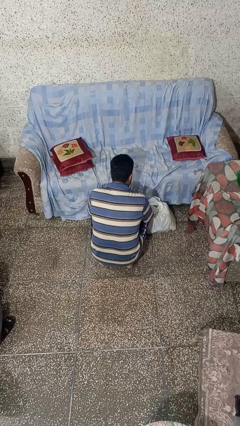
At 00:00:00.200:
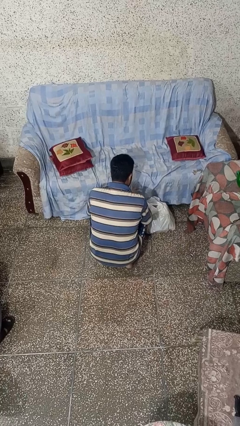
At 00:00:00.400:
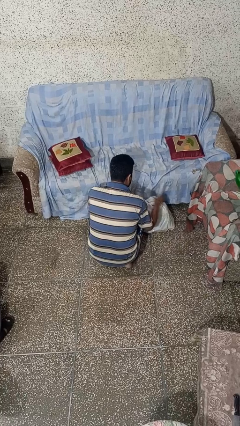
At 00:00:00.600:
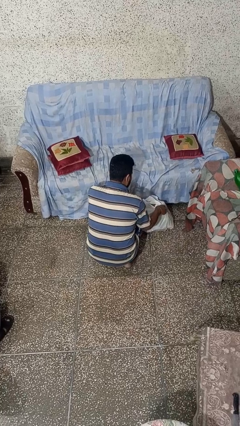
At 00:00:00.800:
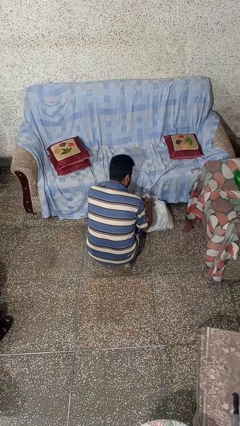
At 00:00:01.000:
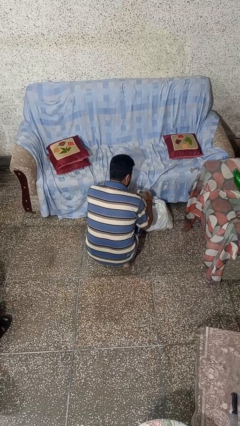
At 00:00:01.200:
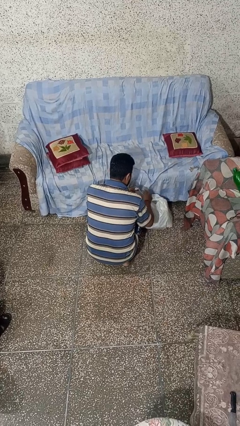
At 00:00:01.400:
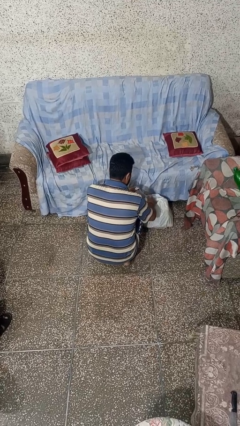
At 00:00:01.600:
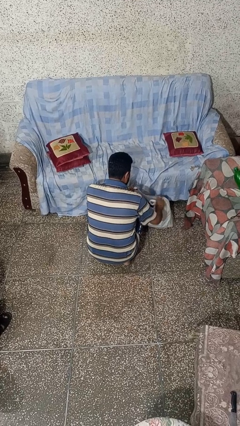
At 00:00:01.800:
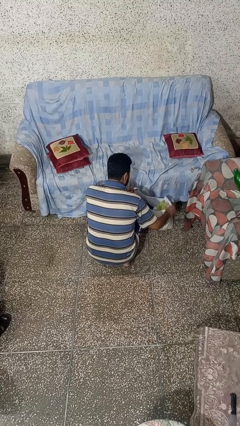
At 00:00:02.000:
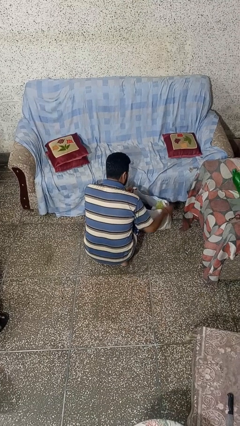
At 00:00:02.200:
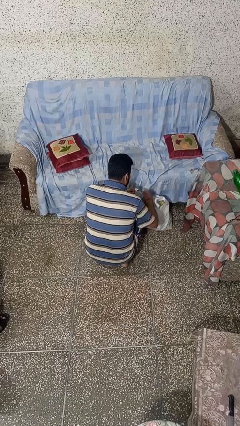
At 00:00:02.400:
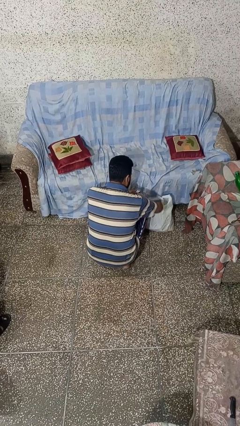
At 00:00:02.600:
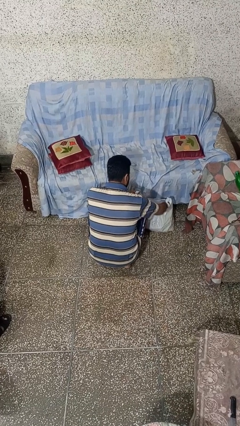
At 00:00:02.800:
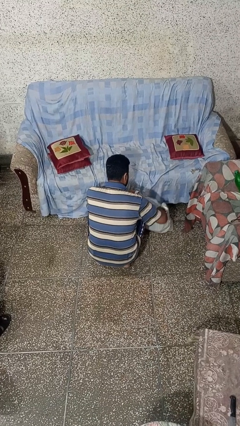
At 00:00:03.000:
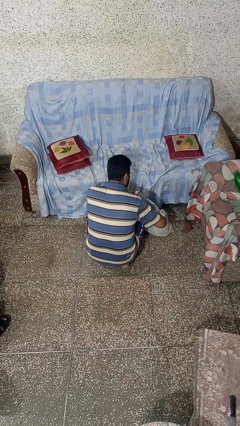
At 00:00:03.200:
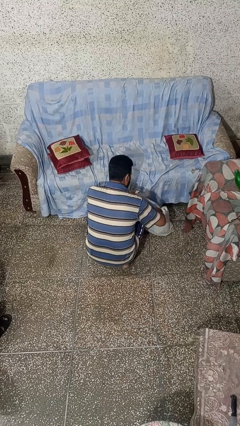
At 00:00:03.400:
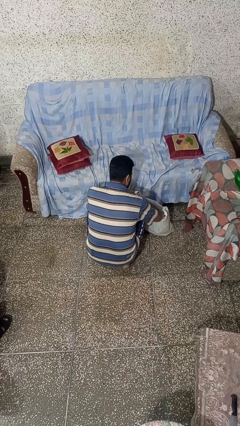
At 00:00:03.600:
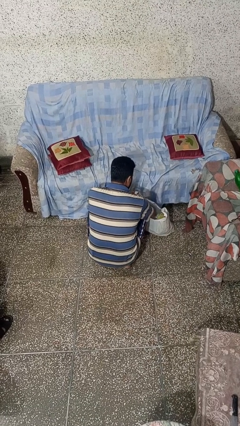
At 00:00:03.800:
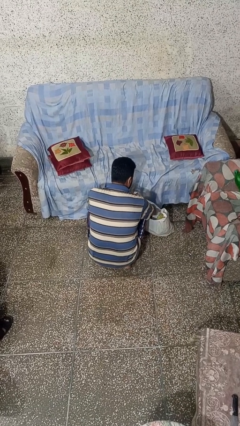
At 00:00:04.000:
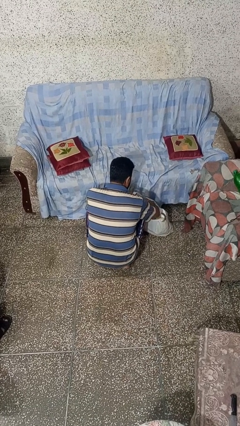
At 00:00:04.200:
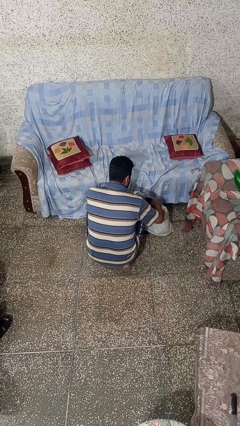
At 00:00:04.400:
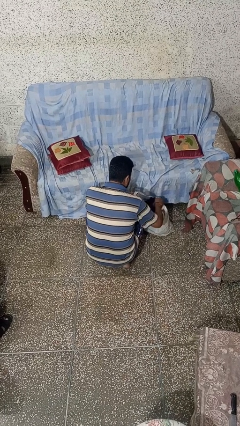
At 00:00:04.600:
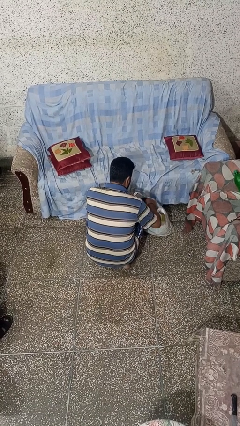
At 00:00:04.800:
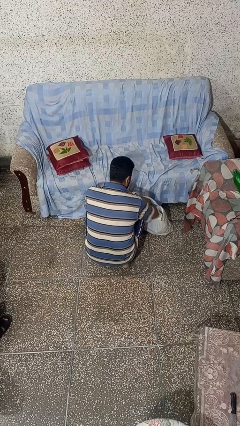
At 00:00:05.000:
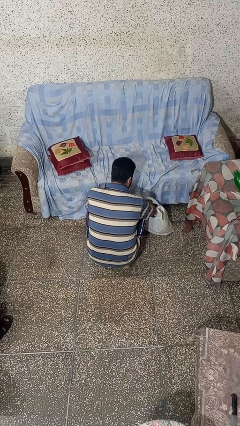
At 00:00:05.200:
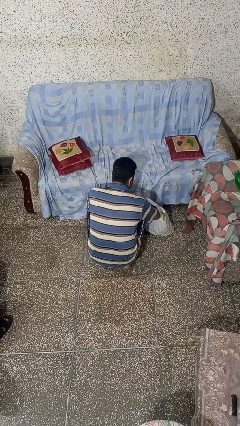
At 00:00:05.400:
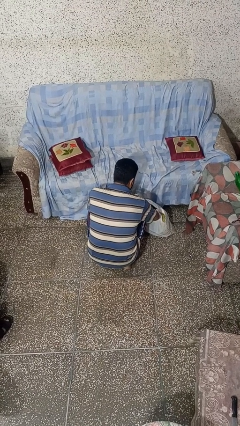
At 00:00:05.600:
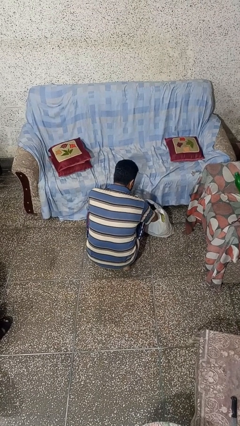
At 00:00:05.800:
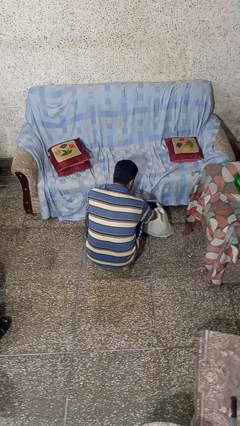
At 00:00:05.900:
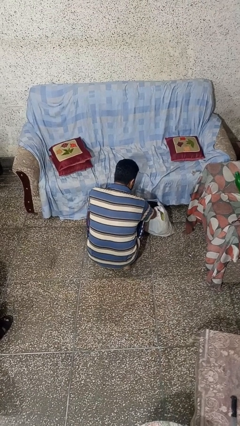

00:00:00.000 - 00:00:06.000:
person searches in bag

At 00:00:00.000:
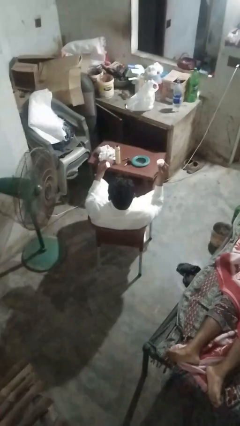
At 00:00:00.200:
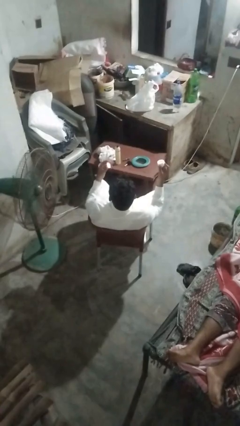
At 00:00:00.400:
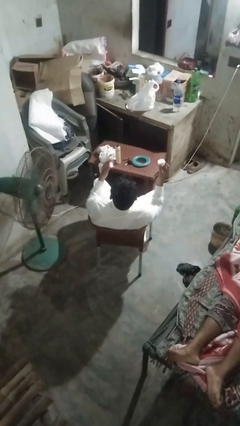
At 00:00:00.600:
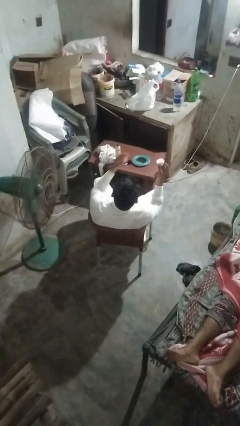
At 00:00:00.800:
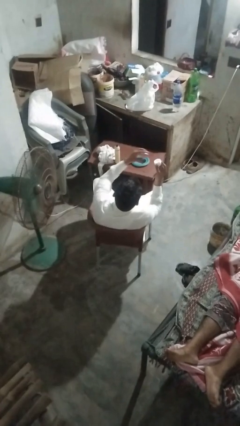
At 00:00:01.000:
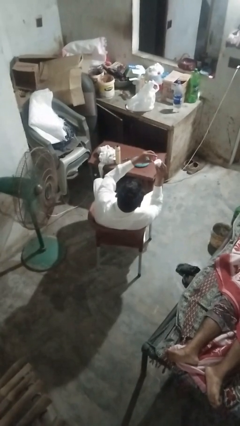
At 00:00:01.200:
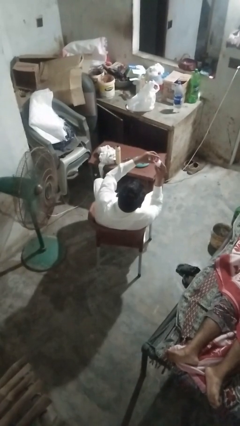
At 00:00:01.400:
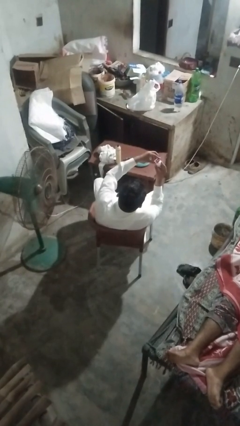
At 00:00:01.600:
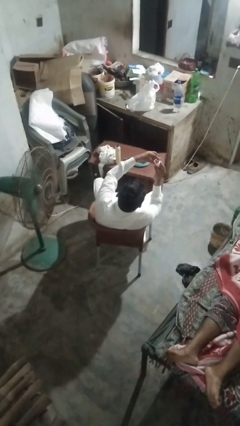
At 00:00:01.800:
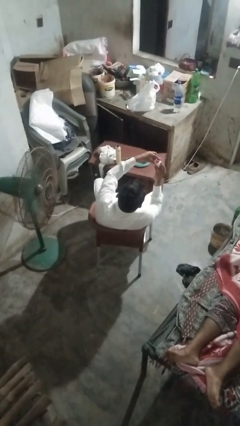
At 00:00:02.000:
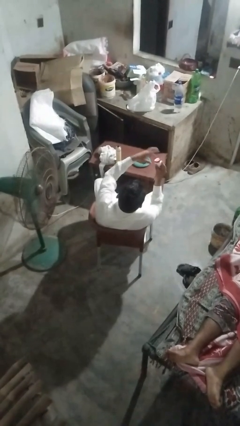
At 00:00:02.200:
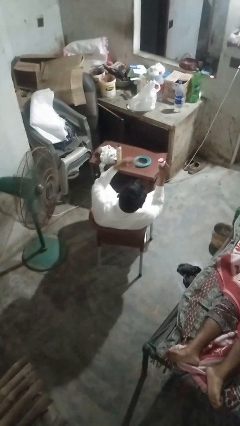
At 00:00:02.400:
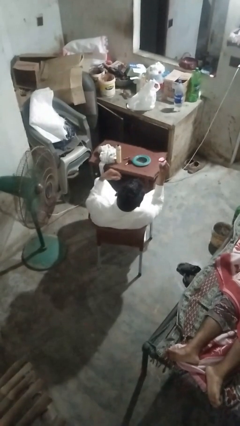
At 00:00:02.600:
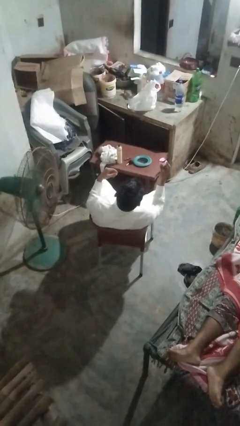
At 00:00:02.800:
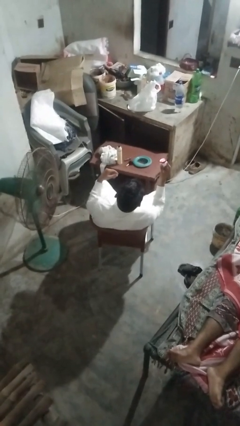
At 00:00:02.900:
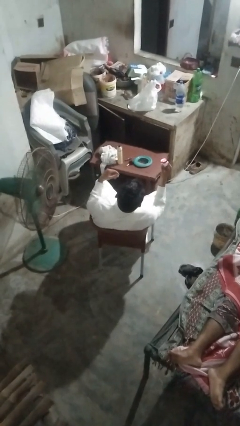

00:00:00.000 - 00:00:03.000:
person closes jar

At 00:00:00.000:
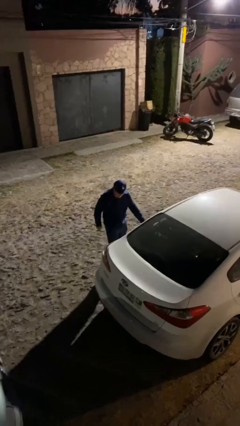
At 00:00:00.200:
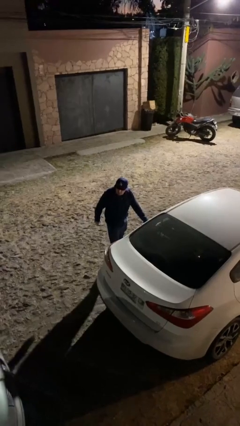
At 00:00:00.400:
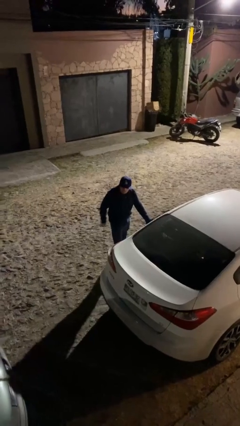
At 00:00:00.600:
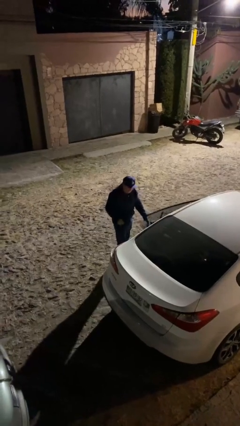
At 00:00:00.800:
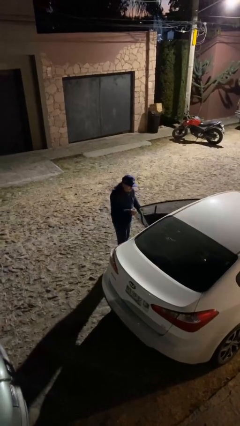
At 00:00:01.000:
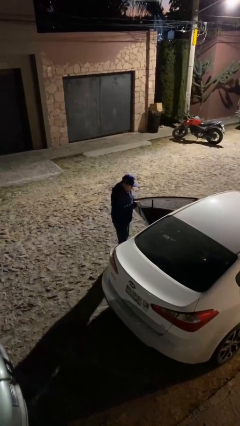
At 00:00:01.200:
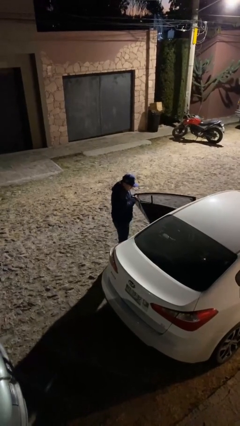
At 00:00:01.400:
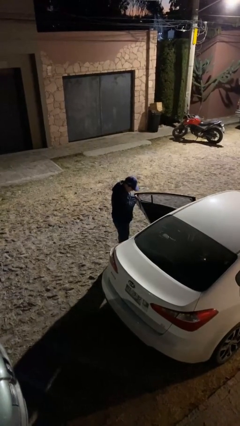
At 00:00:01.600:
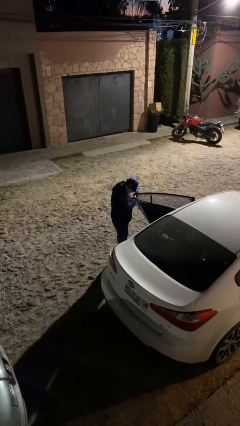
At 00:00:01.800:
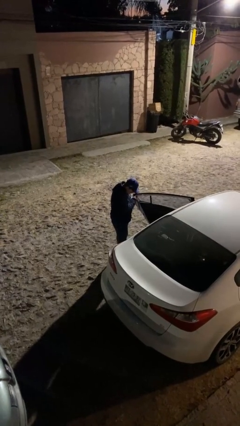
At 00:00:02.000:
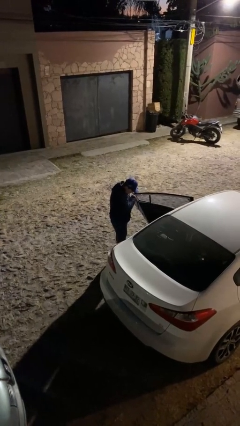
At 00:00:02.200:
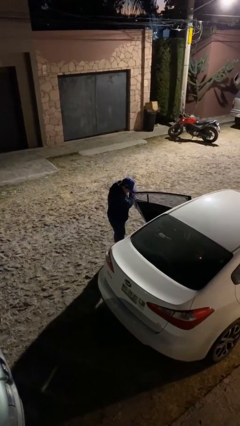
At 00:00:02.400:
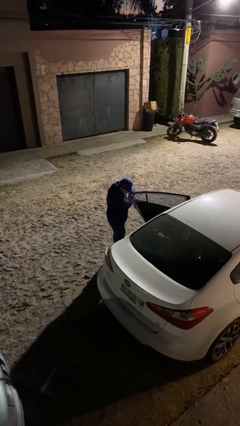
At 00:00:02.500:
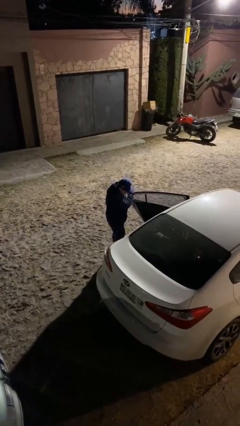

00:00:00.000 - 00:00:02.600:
person opens car door

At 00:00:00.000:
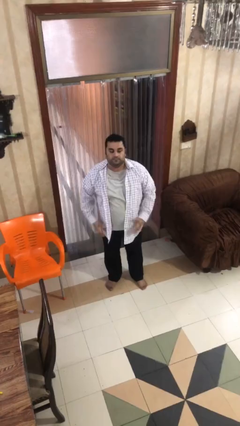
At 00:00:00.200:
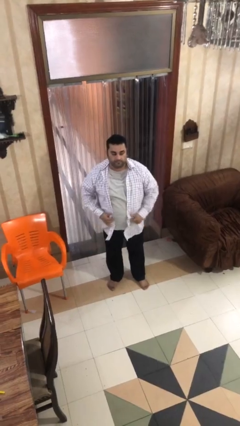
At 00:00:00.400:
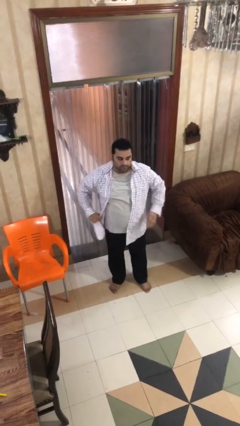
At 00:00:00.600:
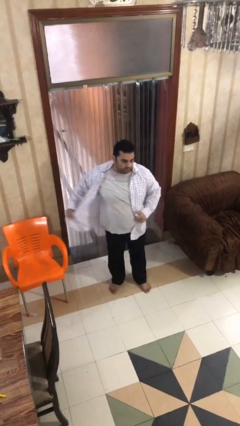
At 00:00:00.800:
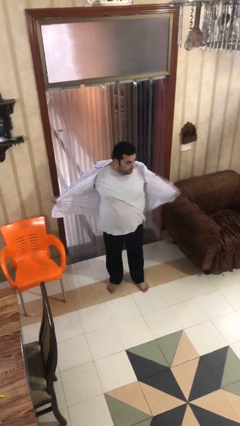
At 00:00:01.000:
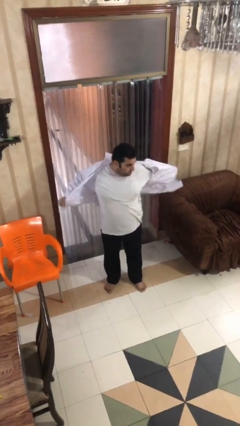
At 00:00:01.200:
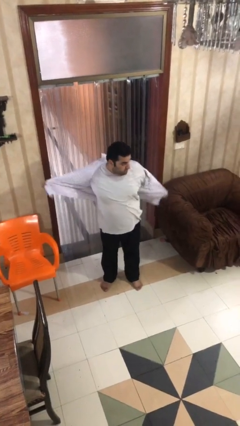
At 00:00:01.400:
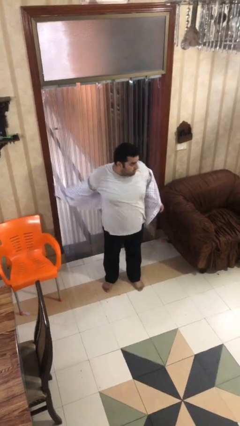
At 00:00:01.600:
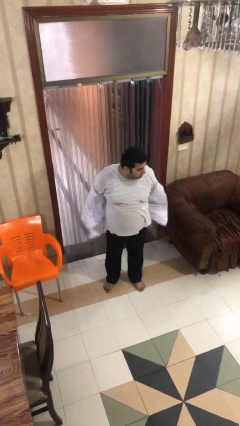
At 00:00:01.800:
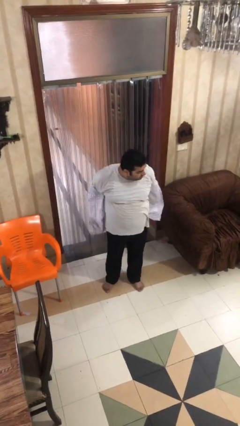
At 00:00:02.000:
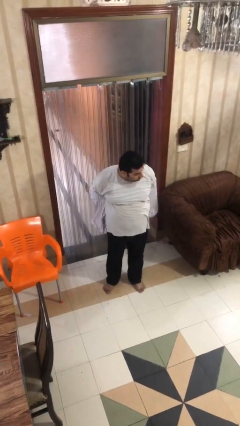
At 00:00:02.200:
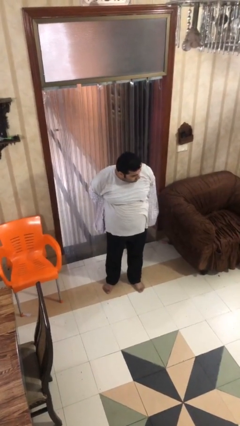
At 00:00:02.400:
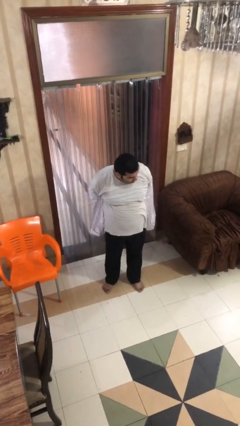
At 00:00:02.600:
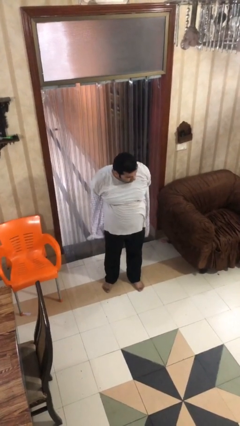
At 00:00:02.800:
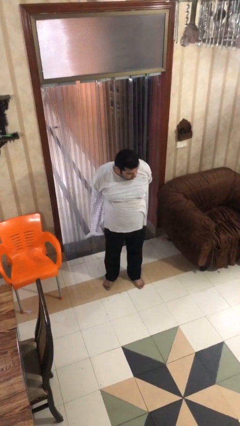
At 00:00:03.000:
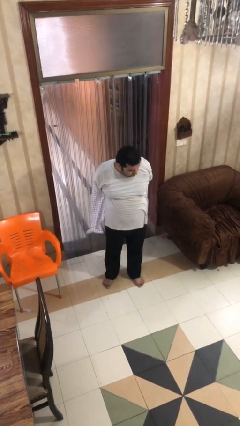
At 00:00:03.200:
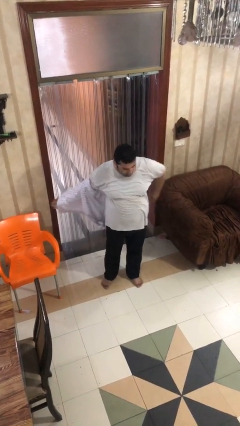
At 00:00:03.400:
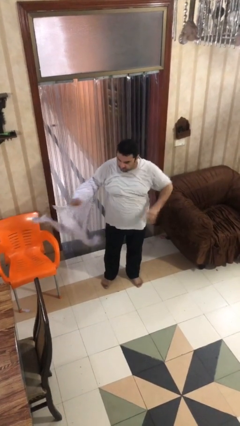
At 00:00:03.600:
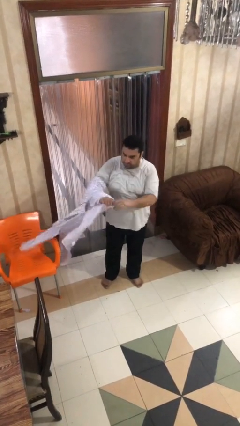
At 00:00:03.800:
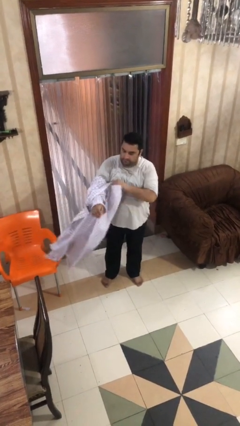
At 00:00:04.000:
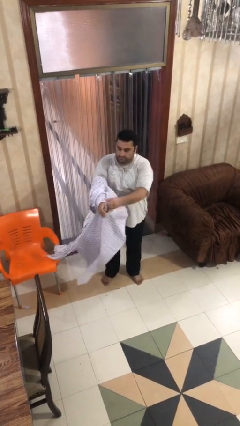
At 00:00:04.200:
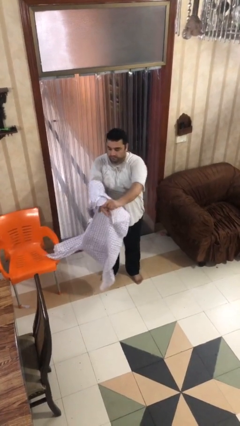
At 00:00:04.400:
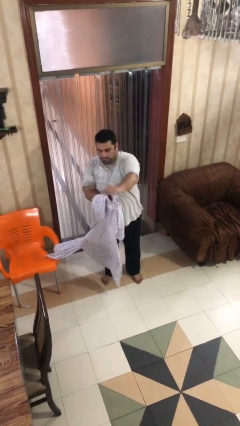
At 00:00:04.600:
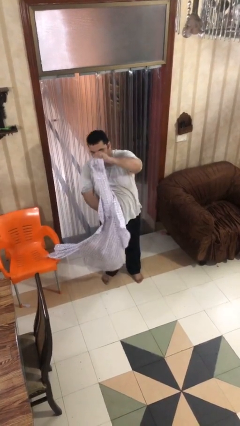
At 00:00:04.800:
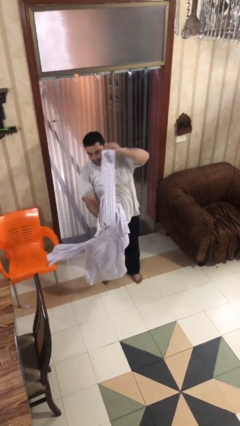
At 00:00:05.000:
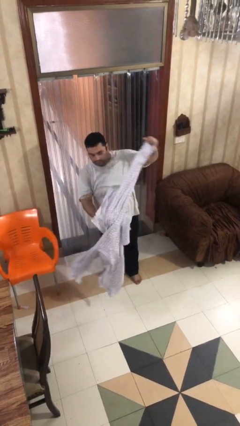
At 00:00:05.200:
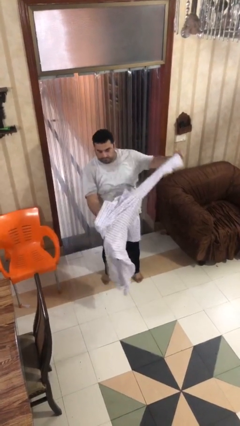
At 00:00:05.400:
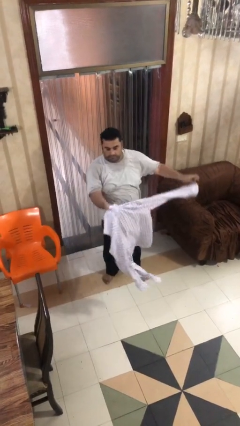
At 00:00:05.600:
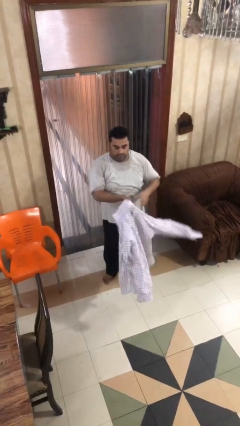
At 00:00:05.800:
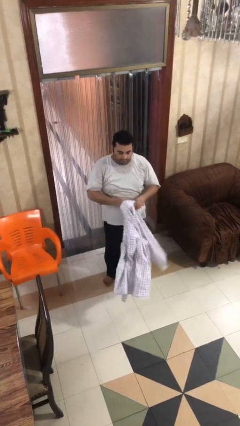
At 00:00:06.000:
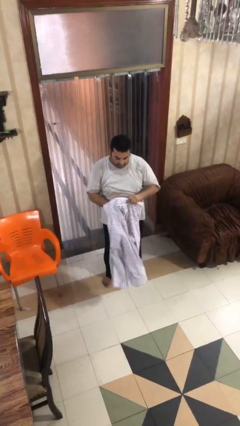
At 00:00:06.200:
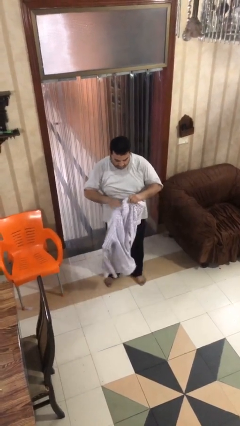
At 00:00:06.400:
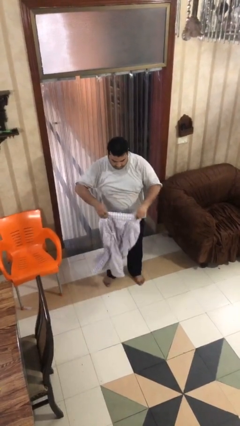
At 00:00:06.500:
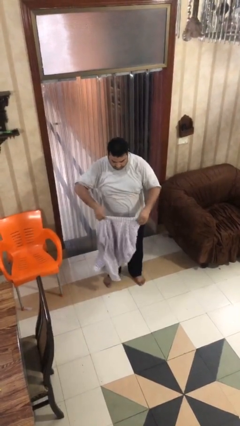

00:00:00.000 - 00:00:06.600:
person takes off shirt
